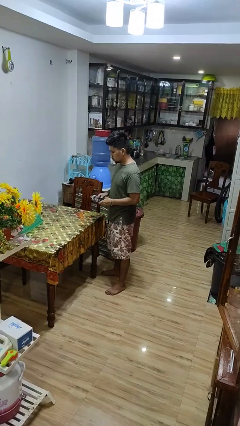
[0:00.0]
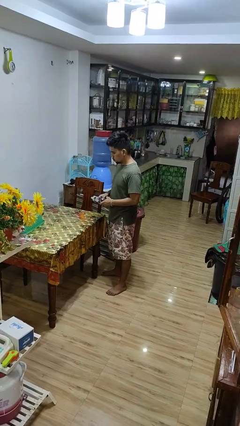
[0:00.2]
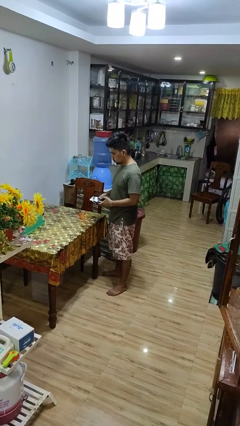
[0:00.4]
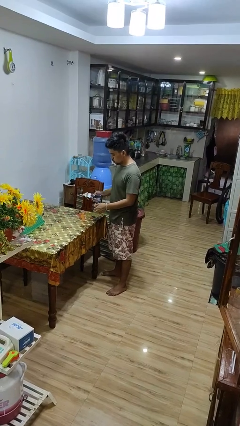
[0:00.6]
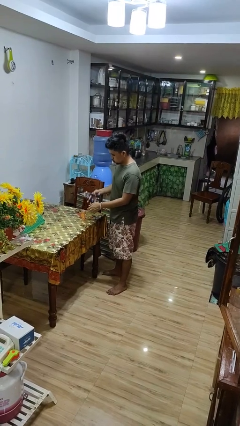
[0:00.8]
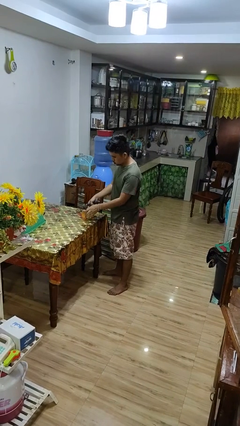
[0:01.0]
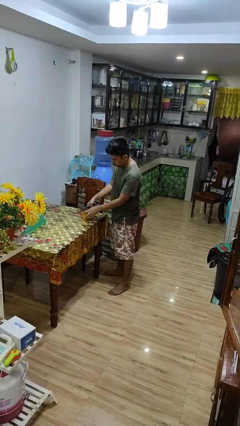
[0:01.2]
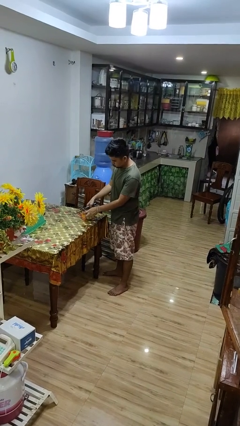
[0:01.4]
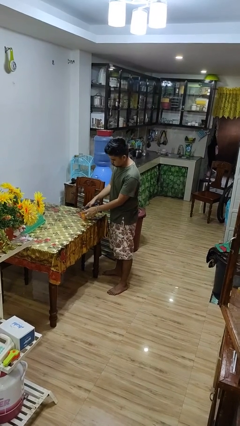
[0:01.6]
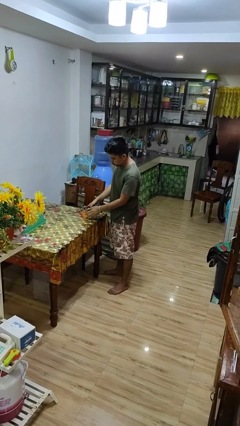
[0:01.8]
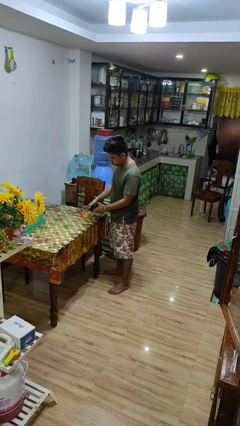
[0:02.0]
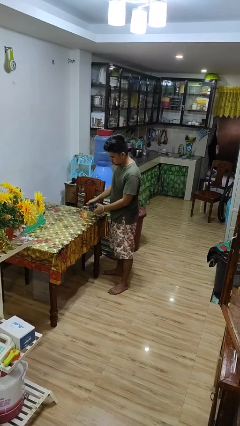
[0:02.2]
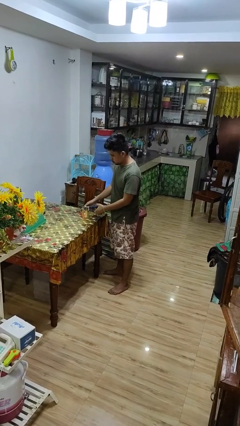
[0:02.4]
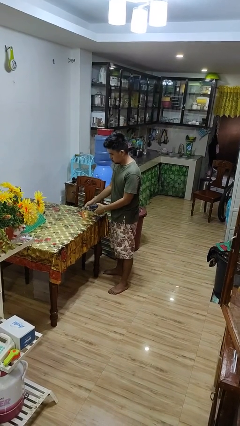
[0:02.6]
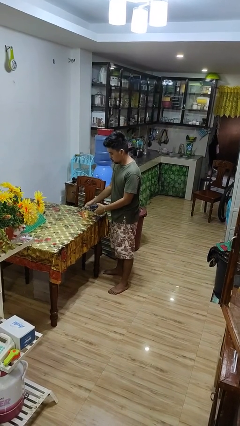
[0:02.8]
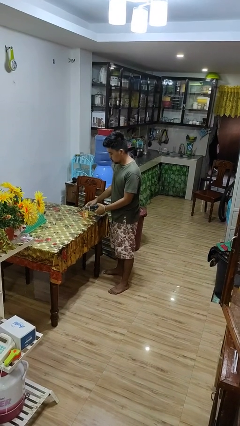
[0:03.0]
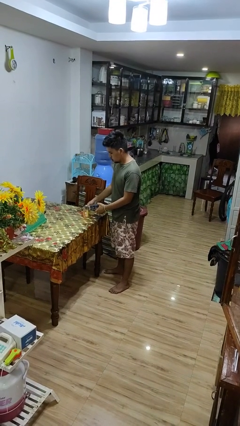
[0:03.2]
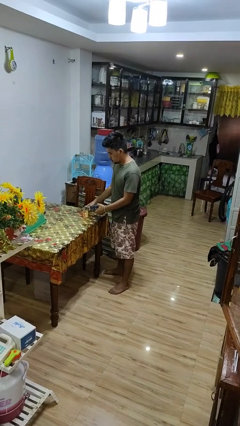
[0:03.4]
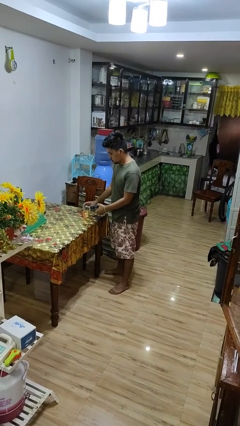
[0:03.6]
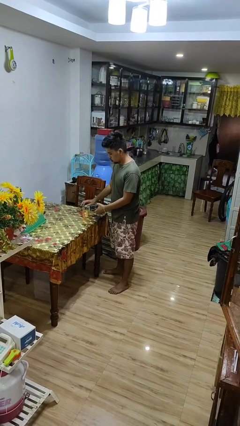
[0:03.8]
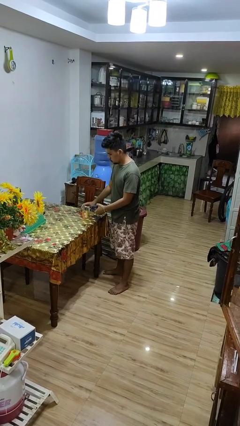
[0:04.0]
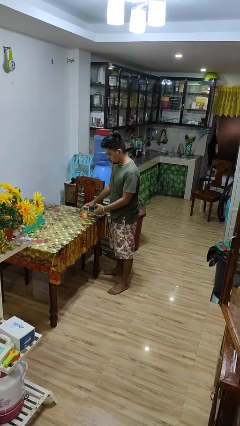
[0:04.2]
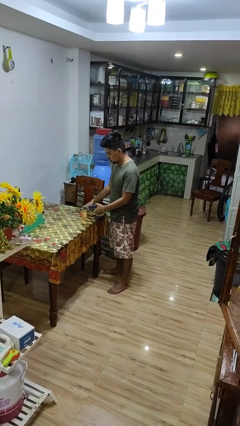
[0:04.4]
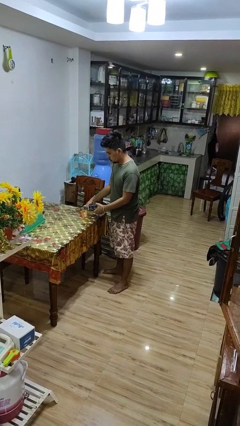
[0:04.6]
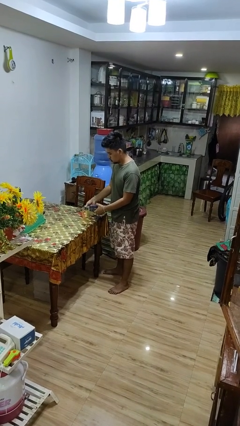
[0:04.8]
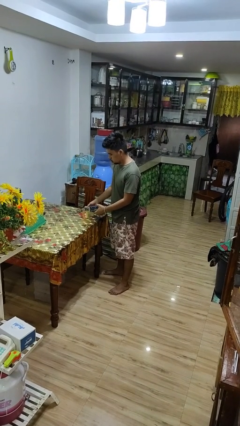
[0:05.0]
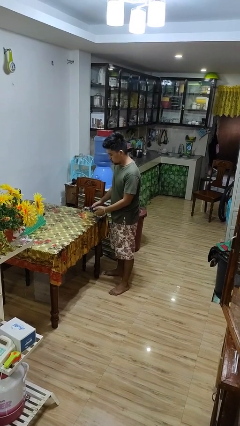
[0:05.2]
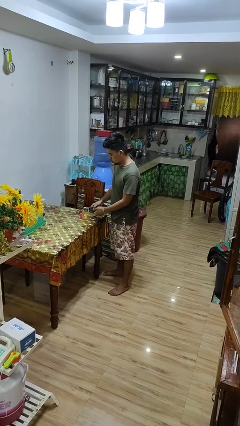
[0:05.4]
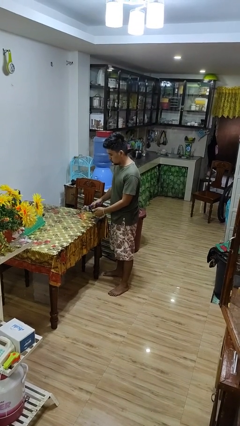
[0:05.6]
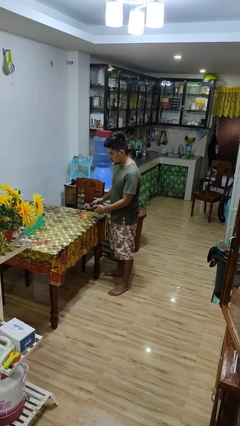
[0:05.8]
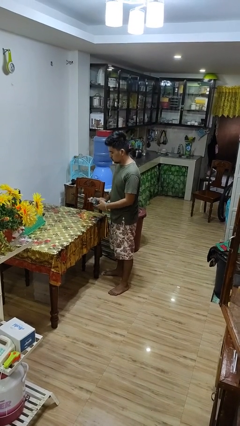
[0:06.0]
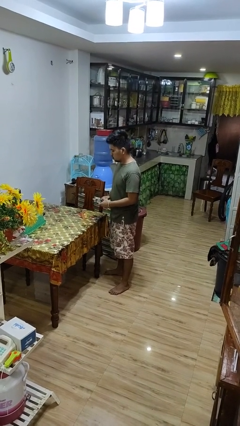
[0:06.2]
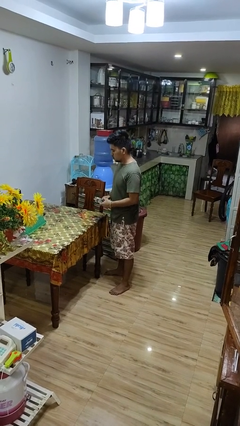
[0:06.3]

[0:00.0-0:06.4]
person opens can with can opener

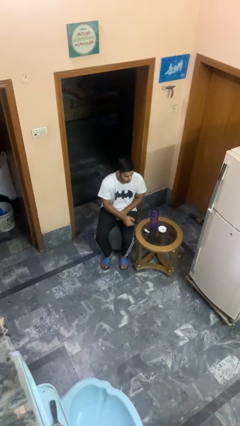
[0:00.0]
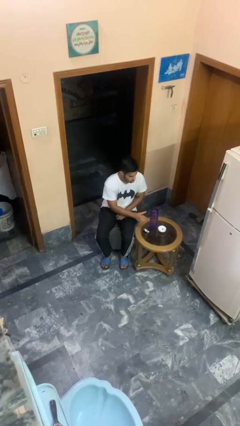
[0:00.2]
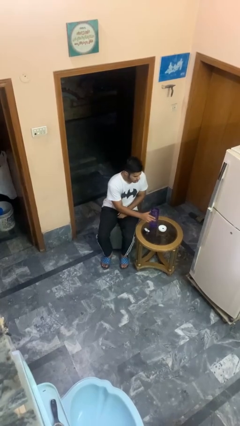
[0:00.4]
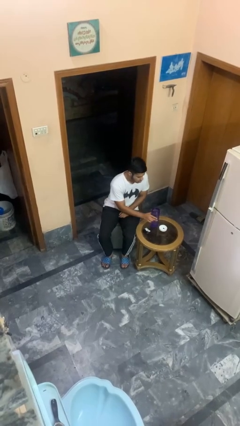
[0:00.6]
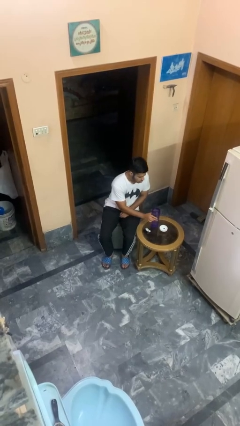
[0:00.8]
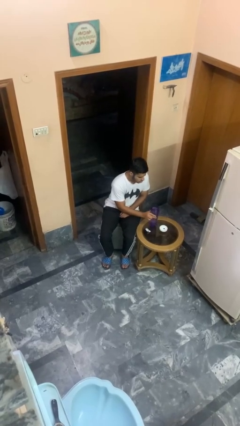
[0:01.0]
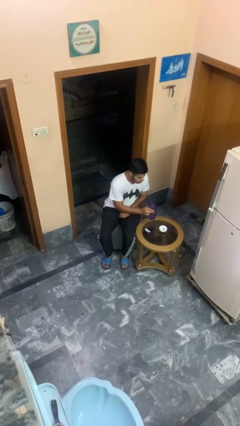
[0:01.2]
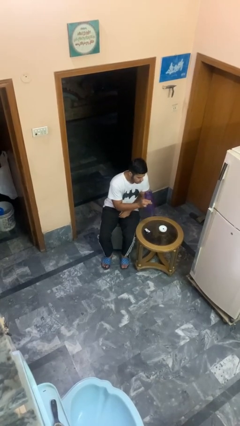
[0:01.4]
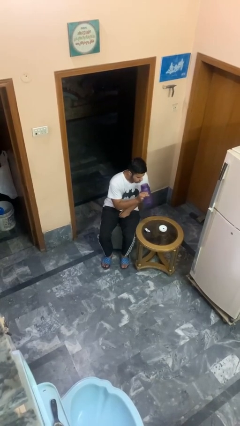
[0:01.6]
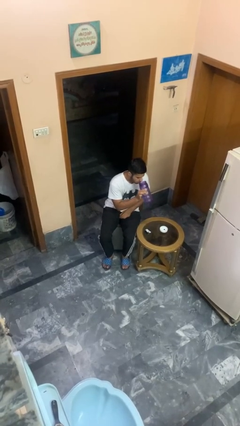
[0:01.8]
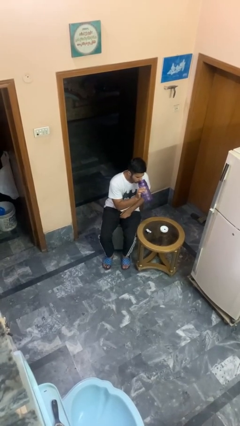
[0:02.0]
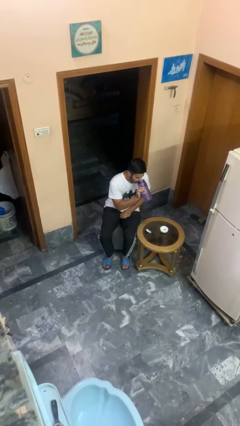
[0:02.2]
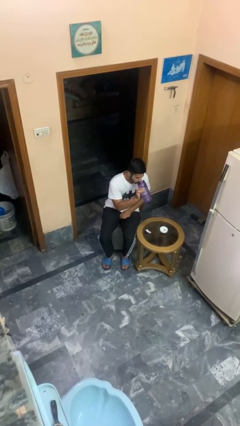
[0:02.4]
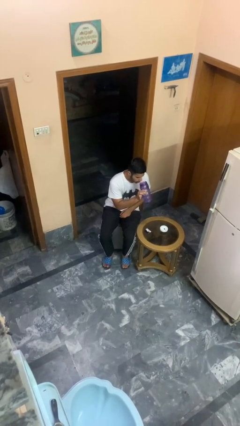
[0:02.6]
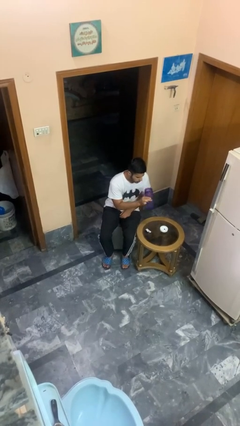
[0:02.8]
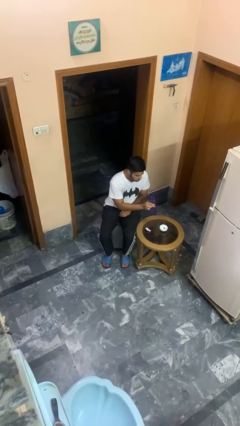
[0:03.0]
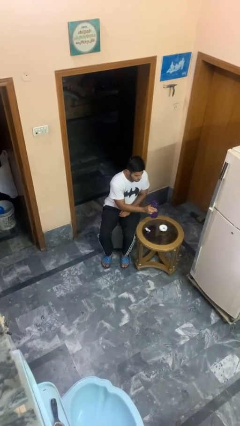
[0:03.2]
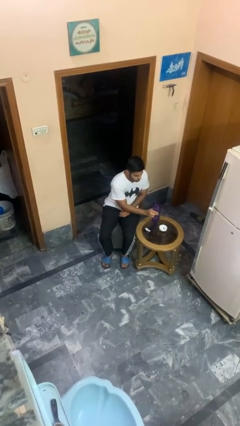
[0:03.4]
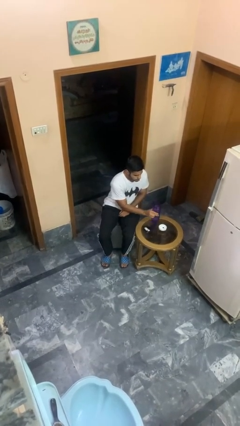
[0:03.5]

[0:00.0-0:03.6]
person drinks from cup

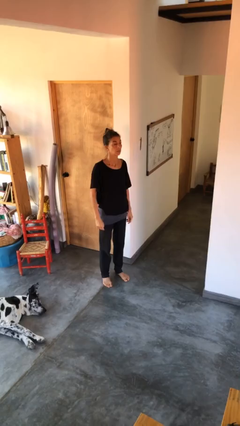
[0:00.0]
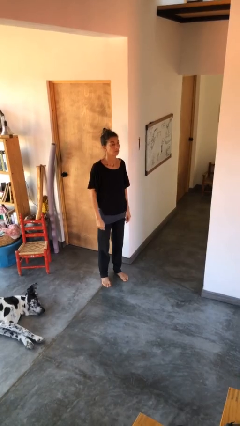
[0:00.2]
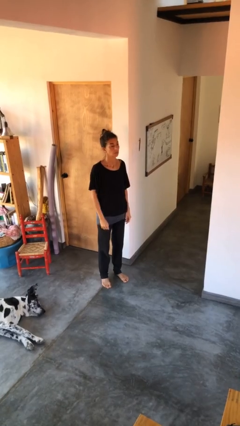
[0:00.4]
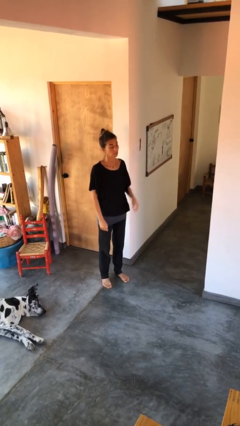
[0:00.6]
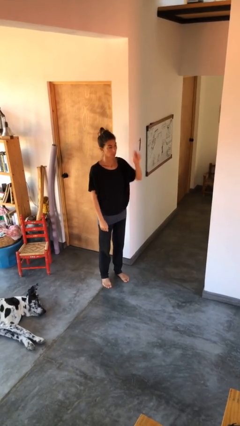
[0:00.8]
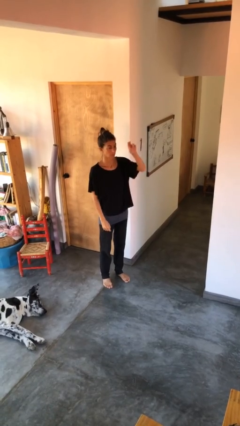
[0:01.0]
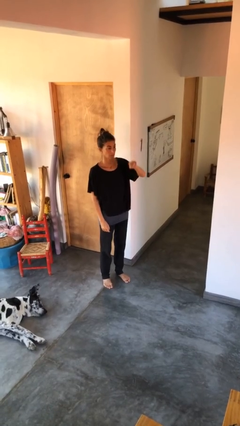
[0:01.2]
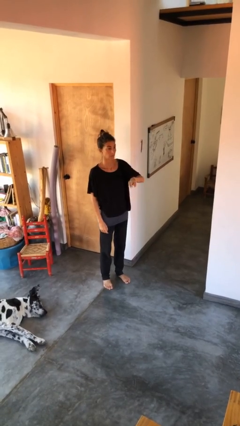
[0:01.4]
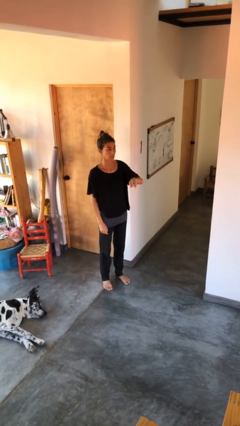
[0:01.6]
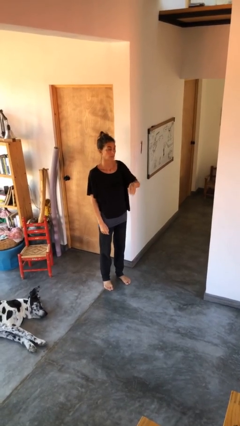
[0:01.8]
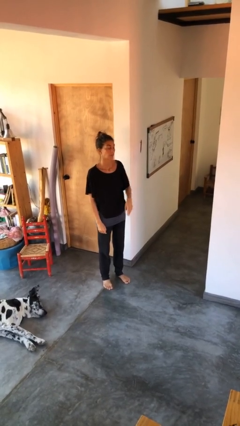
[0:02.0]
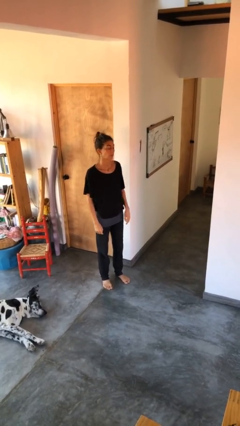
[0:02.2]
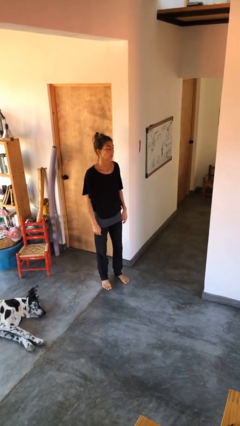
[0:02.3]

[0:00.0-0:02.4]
person gestures swipe down

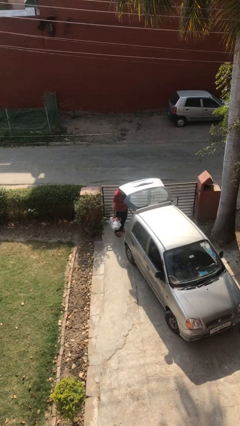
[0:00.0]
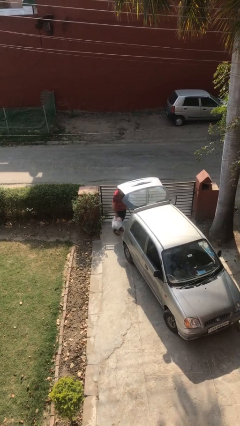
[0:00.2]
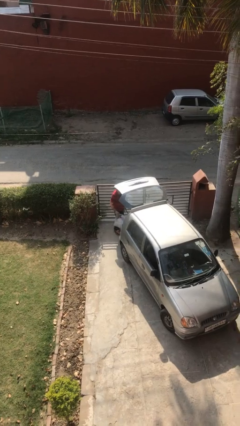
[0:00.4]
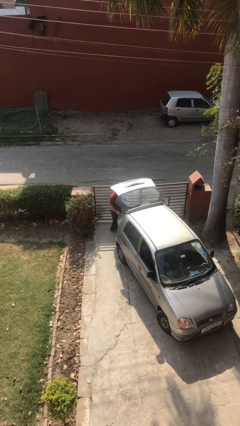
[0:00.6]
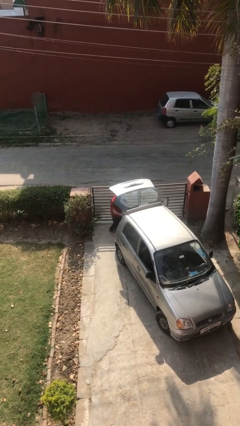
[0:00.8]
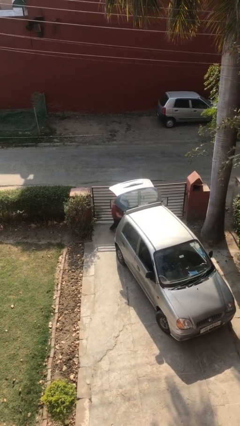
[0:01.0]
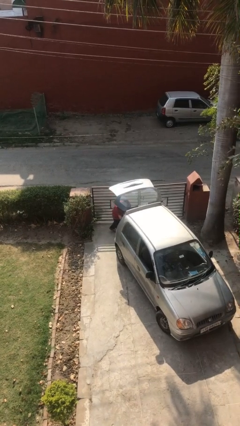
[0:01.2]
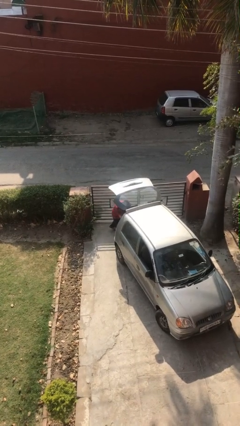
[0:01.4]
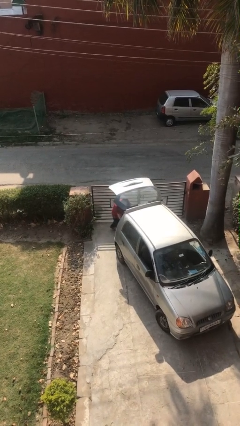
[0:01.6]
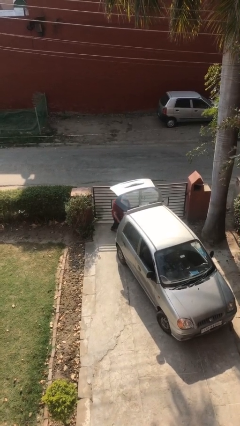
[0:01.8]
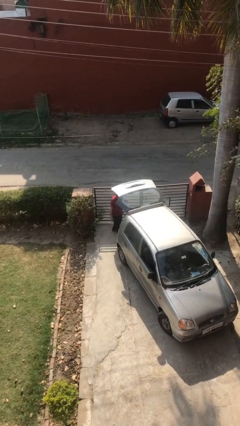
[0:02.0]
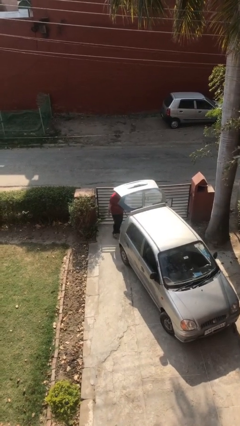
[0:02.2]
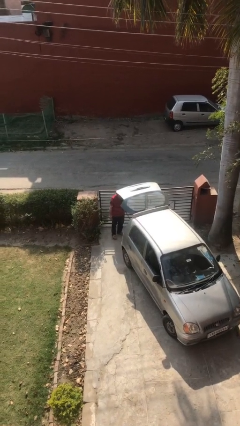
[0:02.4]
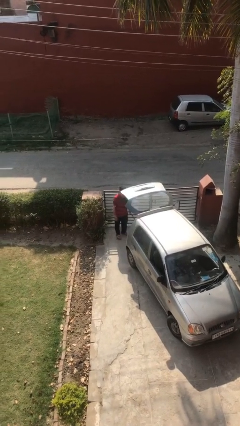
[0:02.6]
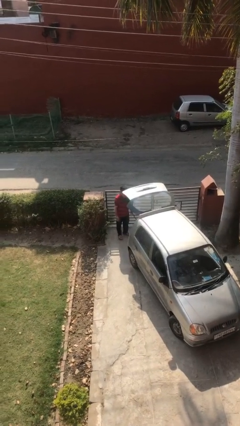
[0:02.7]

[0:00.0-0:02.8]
person loads car

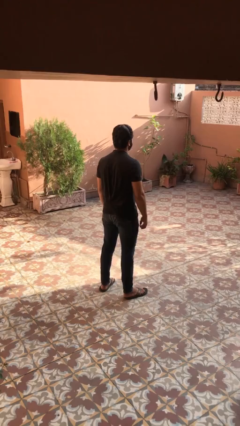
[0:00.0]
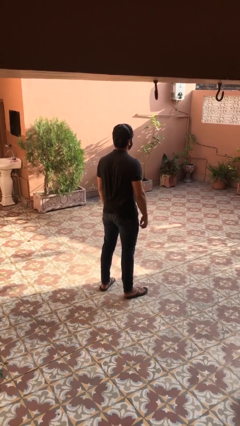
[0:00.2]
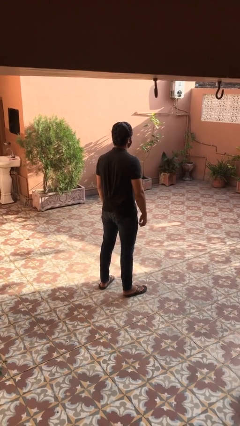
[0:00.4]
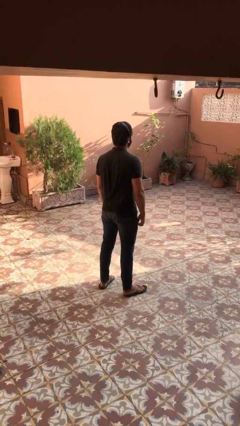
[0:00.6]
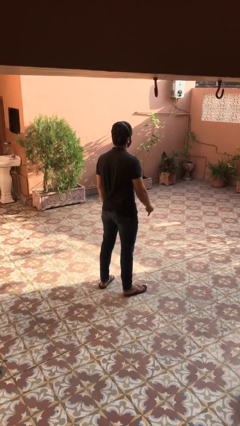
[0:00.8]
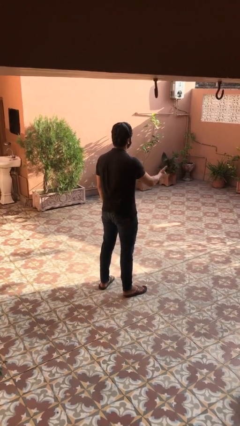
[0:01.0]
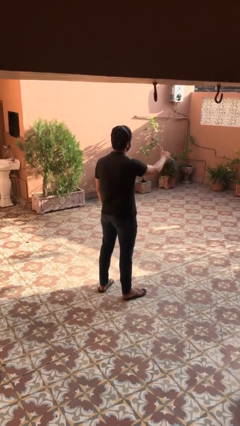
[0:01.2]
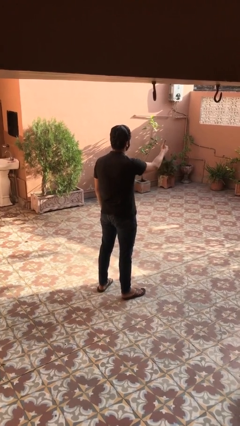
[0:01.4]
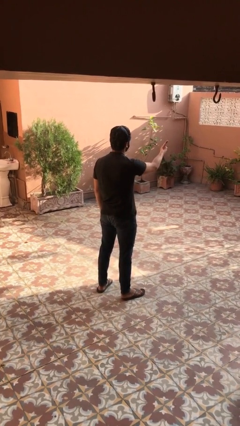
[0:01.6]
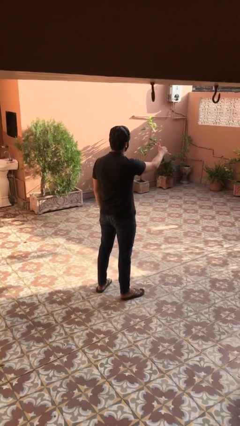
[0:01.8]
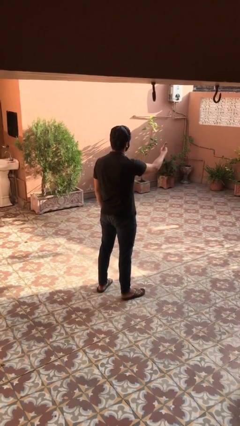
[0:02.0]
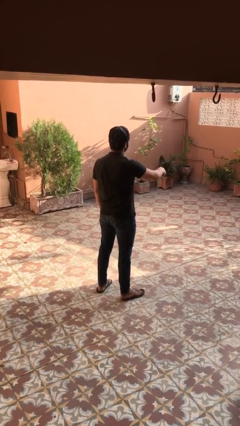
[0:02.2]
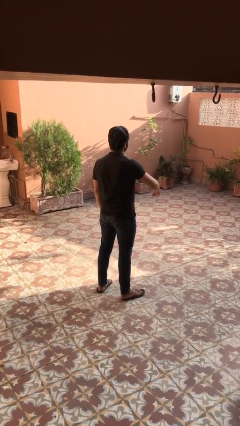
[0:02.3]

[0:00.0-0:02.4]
person gestures hang loose
